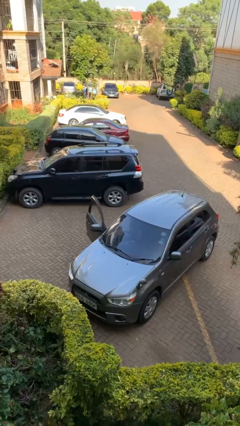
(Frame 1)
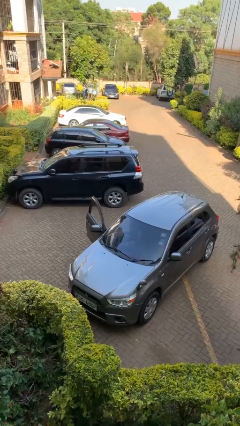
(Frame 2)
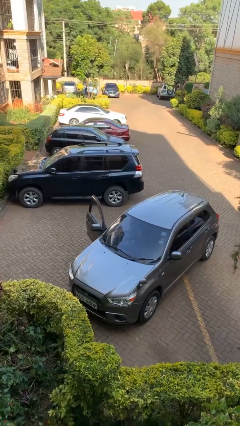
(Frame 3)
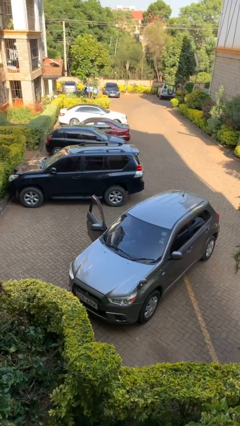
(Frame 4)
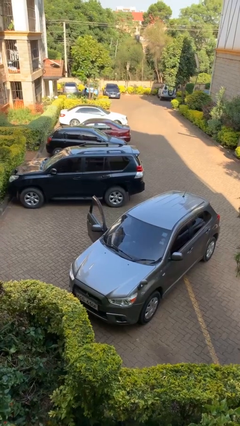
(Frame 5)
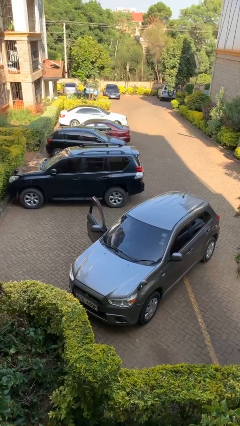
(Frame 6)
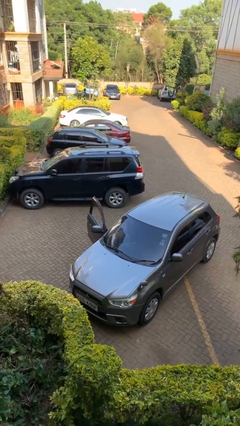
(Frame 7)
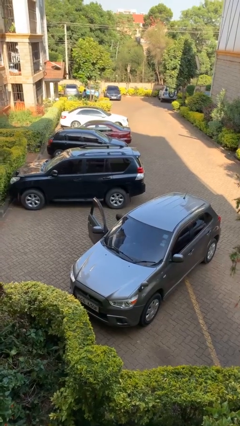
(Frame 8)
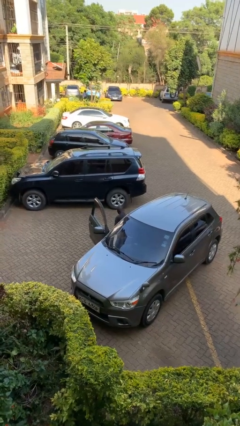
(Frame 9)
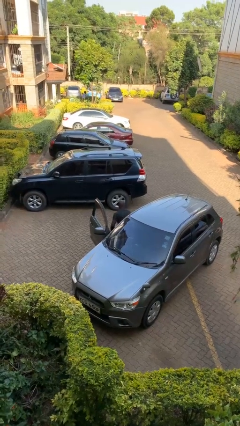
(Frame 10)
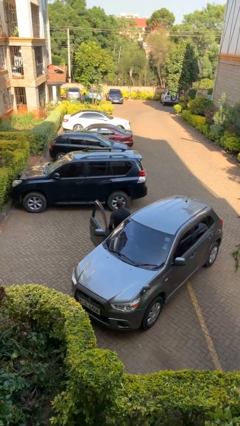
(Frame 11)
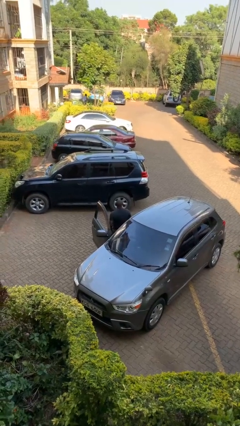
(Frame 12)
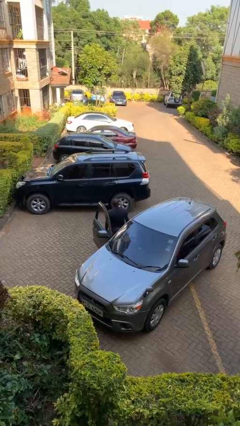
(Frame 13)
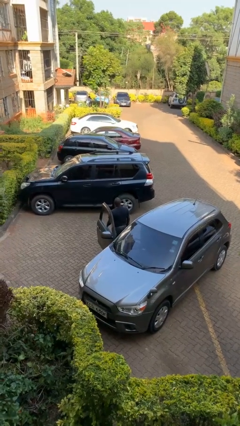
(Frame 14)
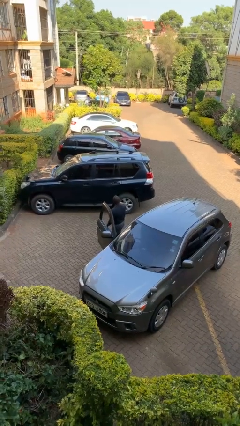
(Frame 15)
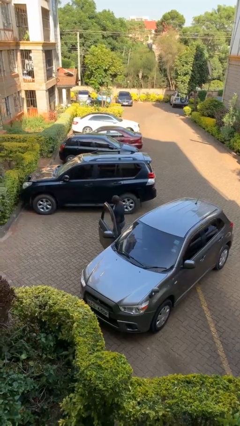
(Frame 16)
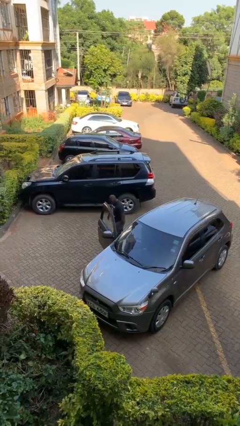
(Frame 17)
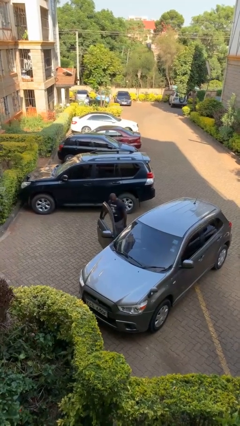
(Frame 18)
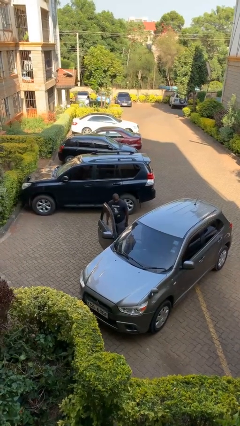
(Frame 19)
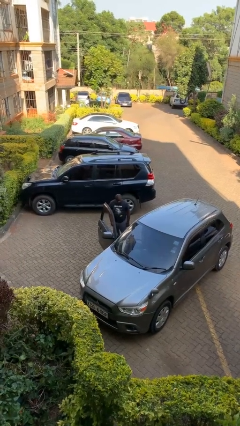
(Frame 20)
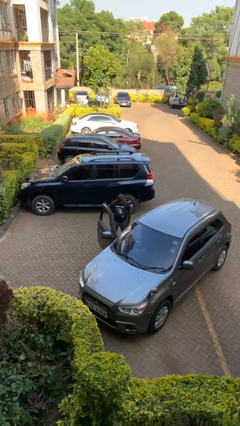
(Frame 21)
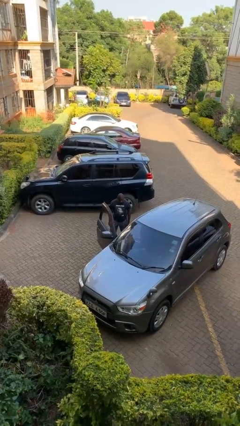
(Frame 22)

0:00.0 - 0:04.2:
person exits car

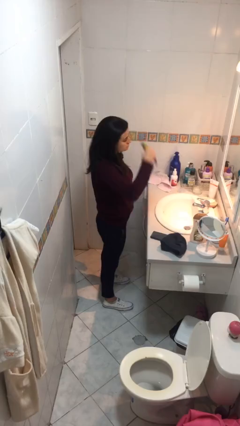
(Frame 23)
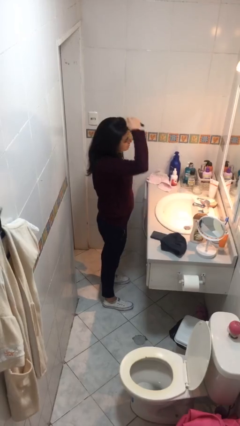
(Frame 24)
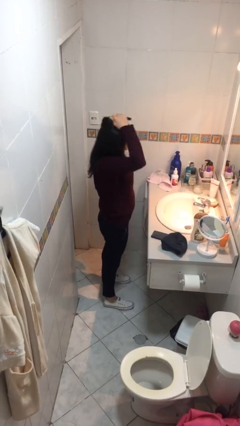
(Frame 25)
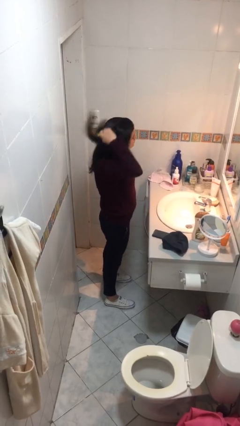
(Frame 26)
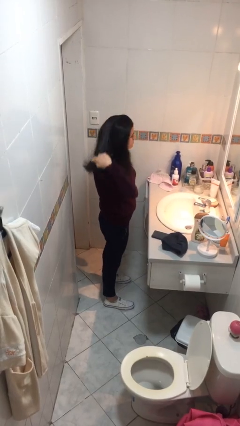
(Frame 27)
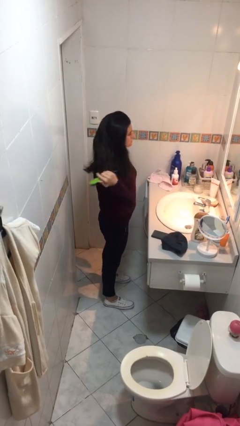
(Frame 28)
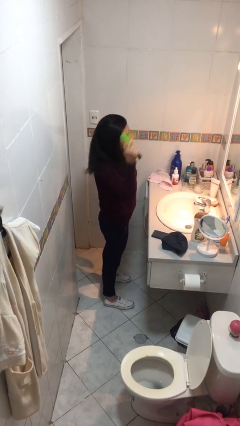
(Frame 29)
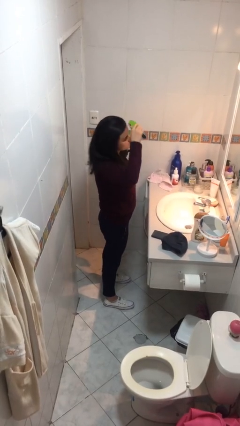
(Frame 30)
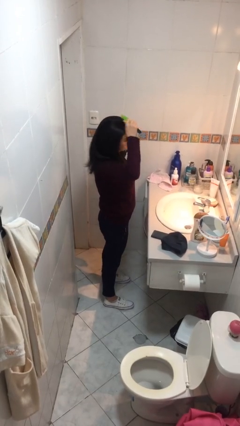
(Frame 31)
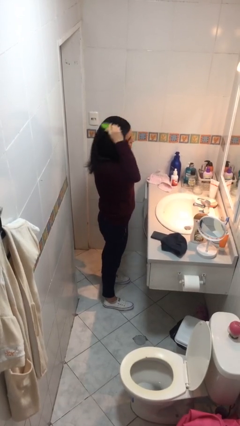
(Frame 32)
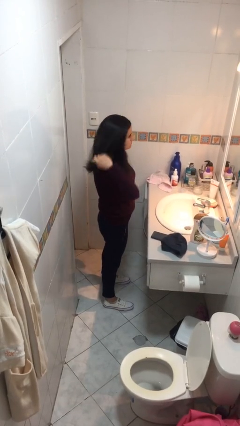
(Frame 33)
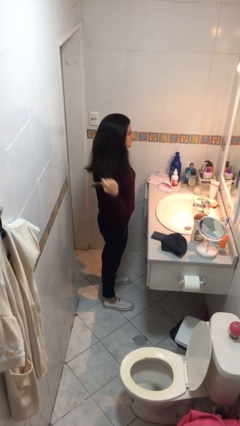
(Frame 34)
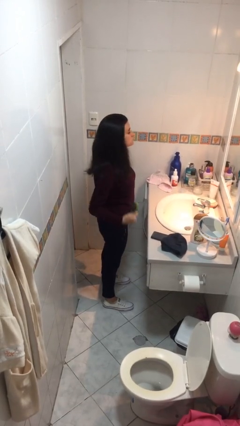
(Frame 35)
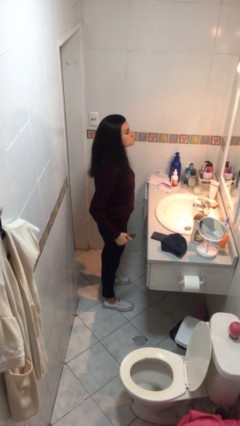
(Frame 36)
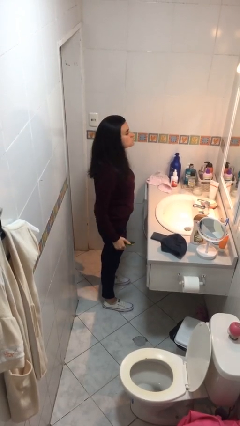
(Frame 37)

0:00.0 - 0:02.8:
person brushes hair

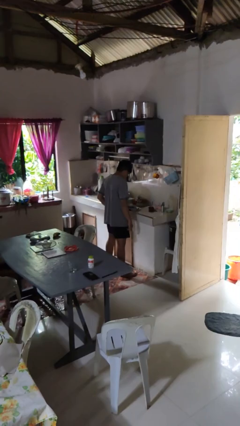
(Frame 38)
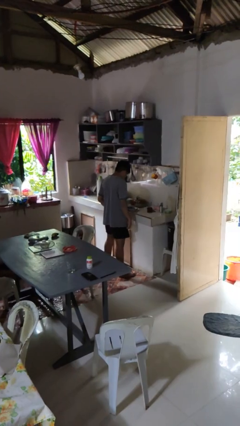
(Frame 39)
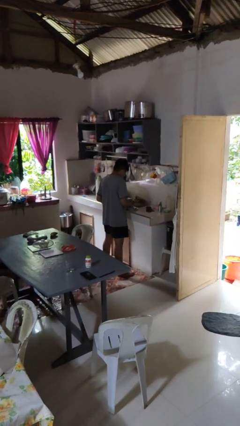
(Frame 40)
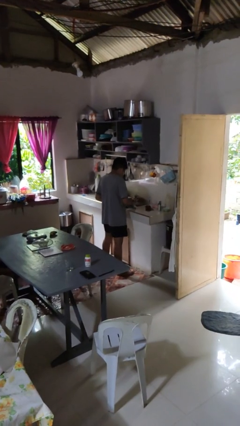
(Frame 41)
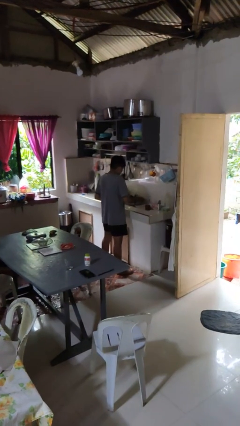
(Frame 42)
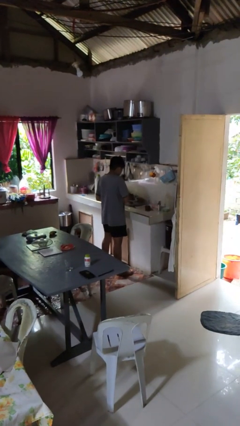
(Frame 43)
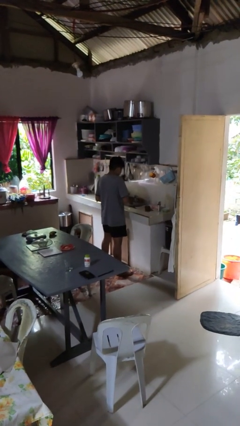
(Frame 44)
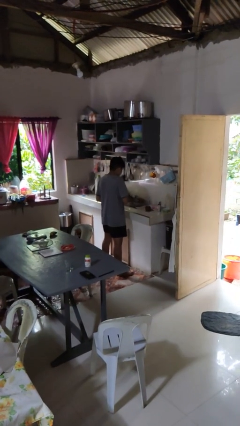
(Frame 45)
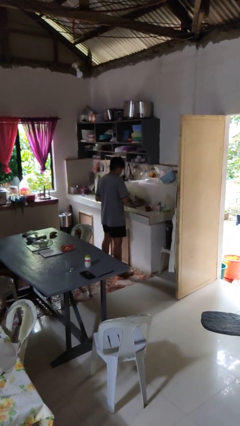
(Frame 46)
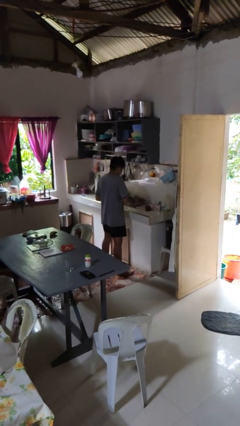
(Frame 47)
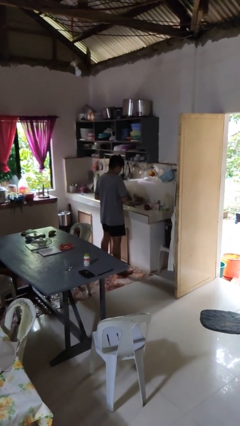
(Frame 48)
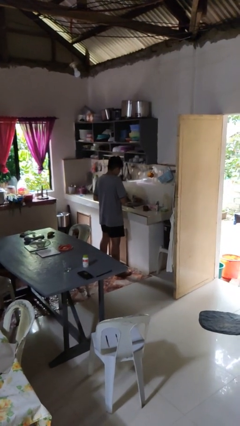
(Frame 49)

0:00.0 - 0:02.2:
person dries dish

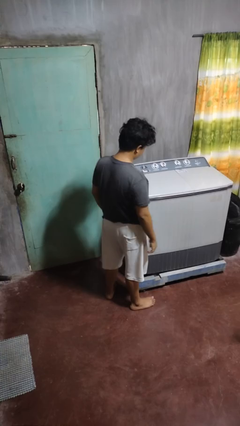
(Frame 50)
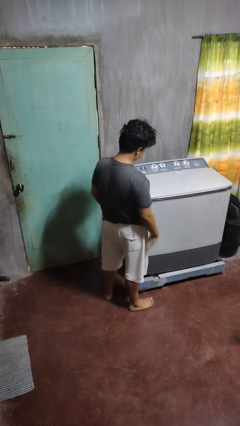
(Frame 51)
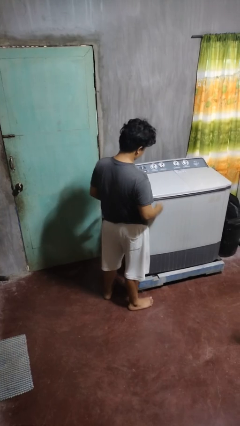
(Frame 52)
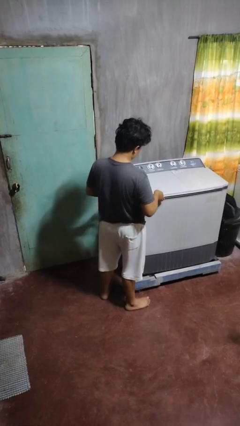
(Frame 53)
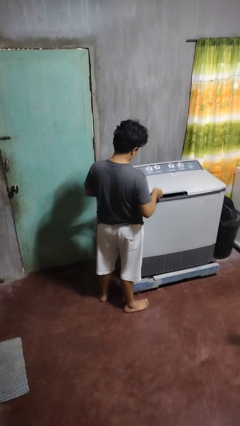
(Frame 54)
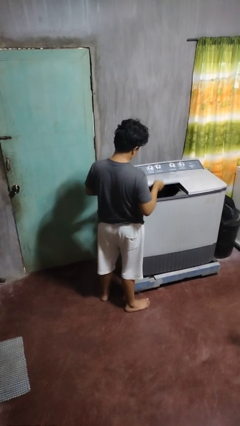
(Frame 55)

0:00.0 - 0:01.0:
person opens clothes washer

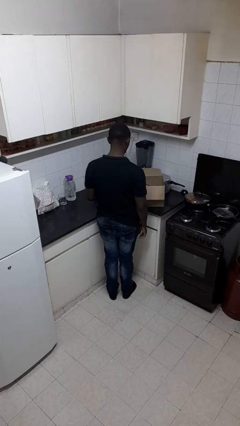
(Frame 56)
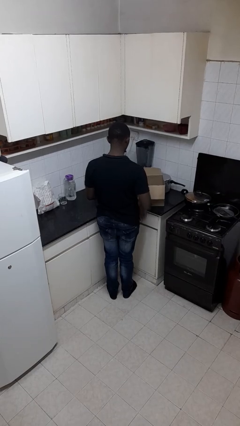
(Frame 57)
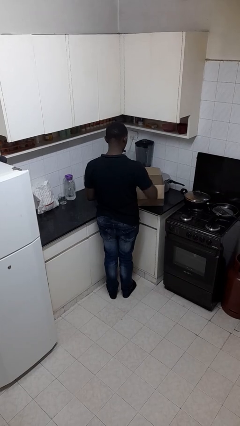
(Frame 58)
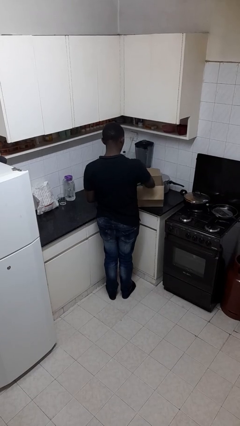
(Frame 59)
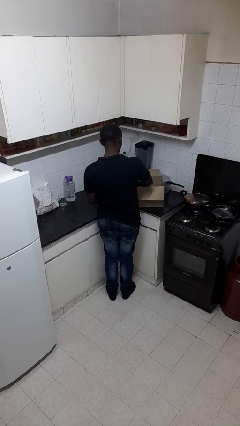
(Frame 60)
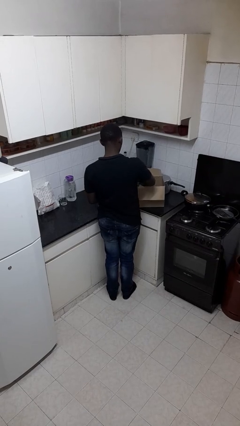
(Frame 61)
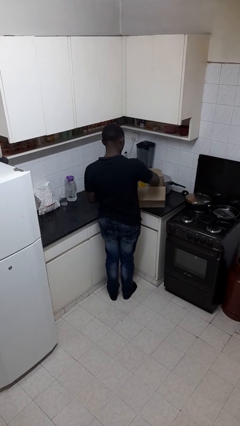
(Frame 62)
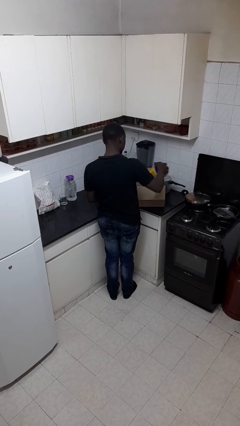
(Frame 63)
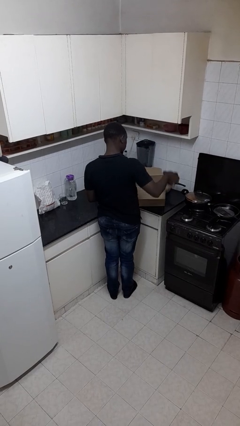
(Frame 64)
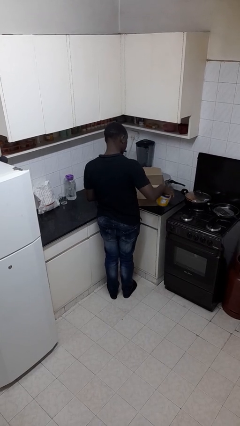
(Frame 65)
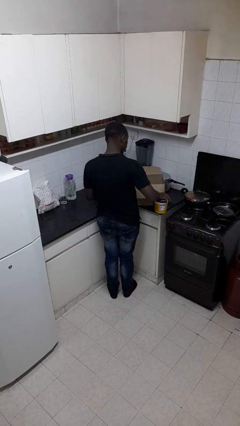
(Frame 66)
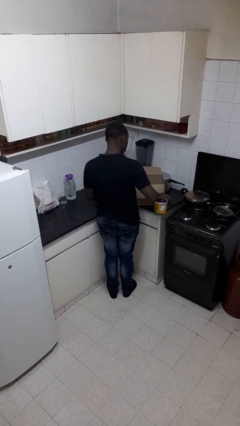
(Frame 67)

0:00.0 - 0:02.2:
person takes object from box

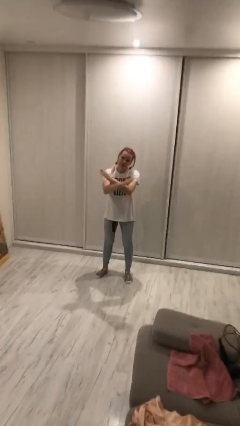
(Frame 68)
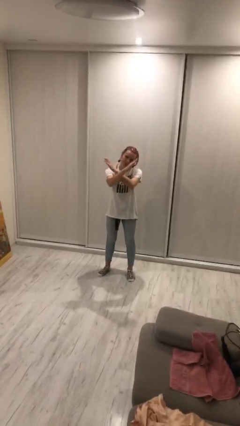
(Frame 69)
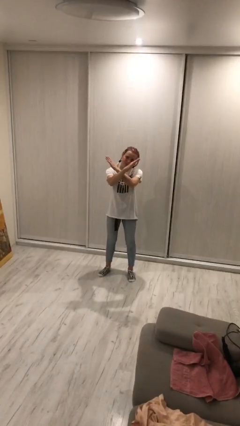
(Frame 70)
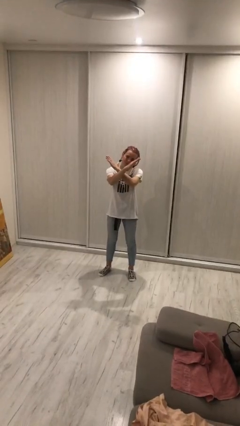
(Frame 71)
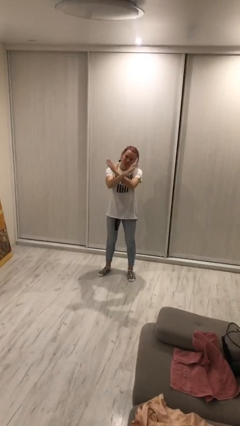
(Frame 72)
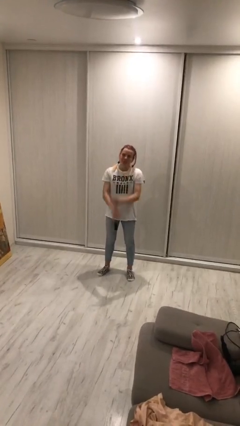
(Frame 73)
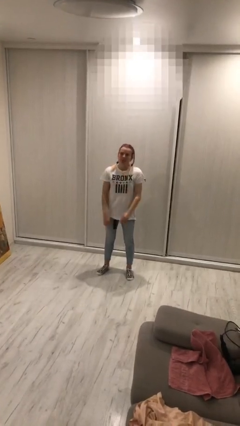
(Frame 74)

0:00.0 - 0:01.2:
person gestures arms x

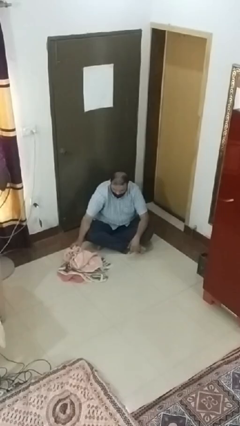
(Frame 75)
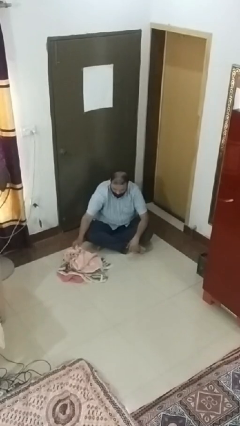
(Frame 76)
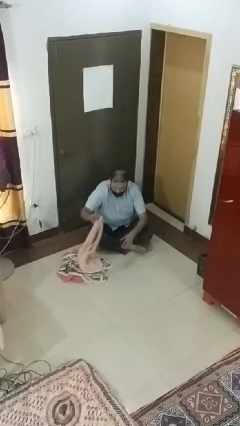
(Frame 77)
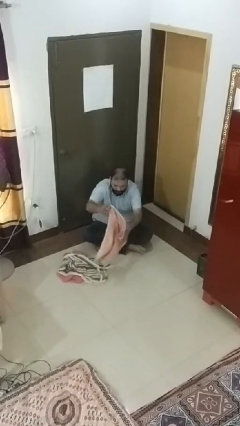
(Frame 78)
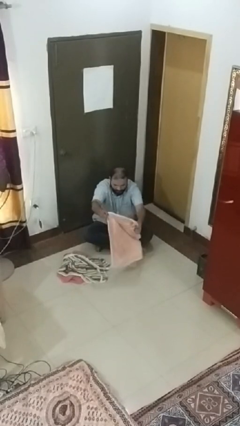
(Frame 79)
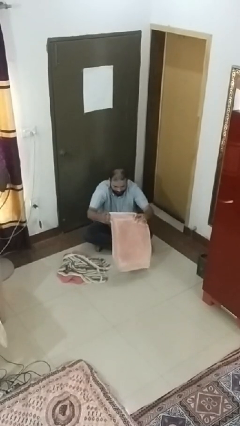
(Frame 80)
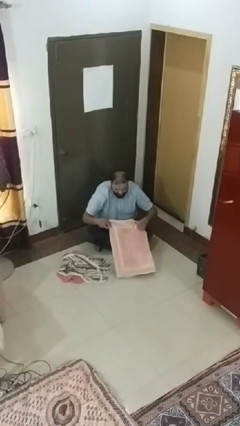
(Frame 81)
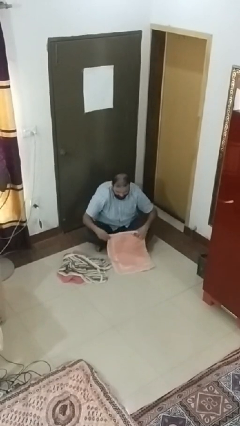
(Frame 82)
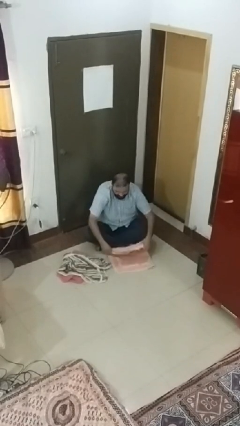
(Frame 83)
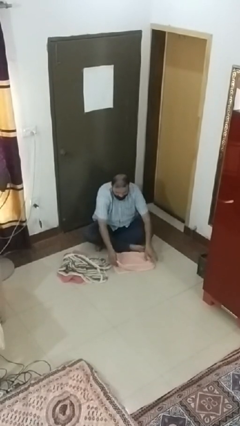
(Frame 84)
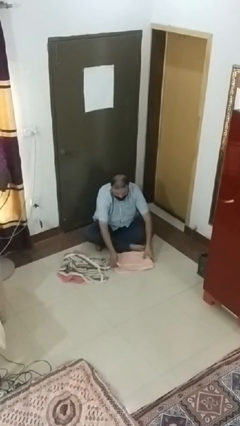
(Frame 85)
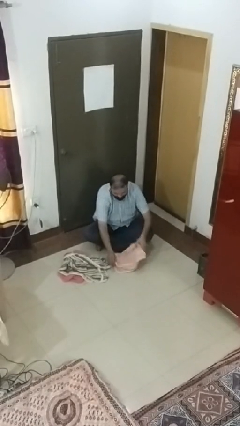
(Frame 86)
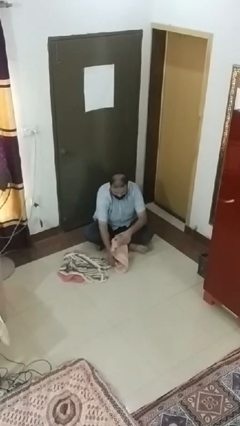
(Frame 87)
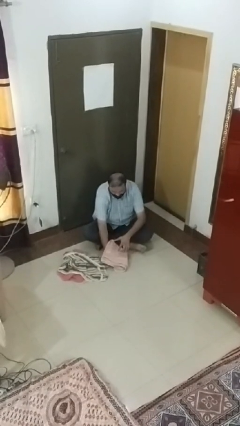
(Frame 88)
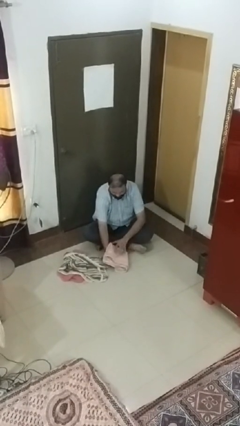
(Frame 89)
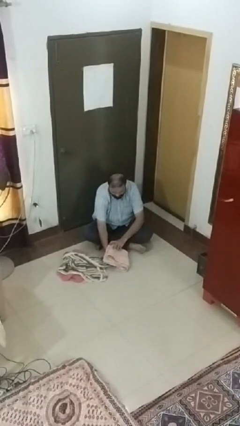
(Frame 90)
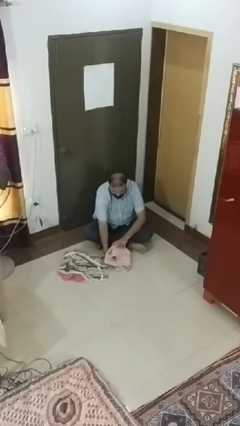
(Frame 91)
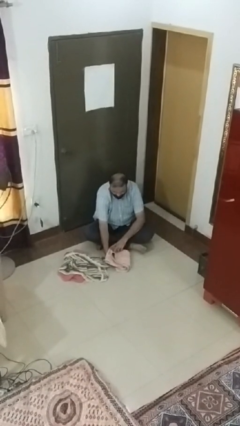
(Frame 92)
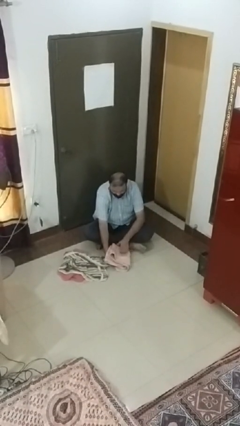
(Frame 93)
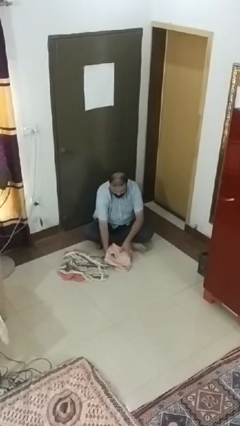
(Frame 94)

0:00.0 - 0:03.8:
person folds towel
